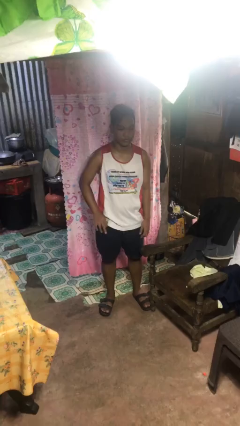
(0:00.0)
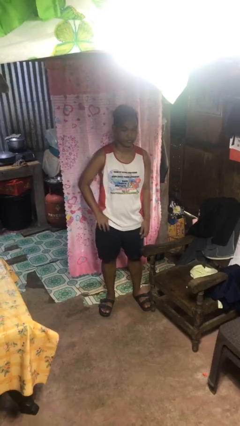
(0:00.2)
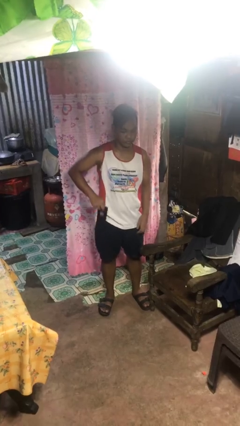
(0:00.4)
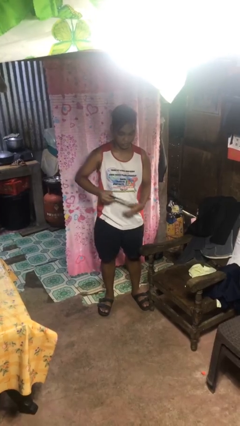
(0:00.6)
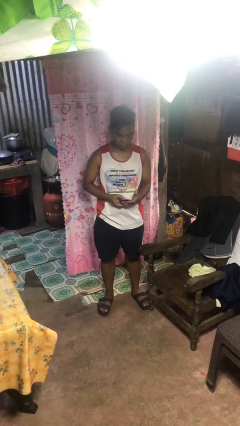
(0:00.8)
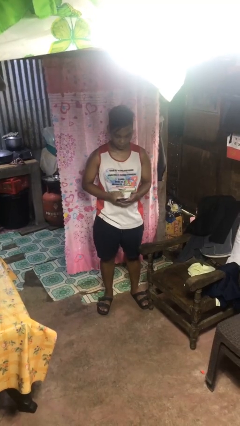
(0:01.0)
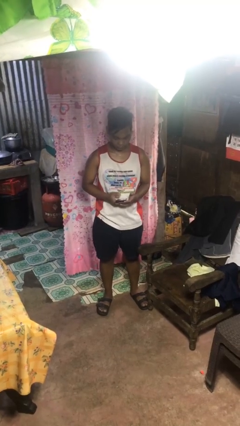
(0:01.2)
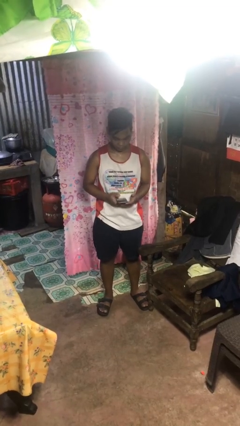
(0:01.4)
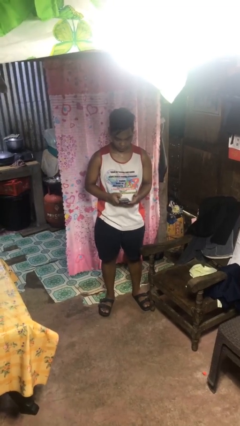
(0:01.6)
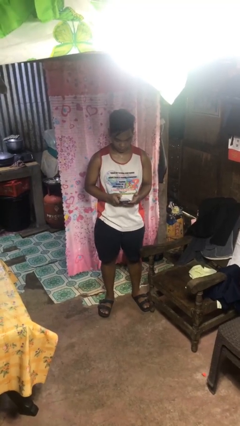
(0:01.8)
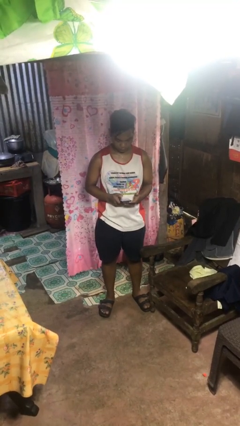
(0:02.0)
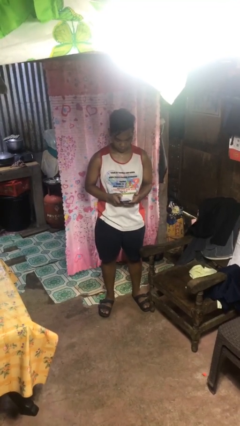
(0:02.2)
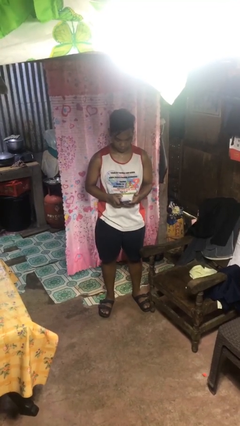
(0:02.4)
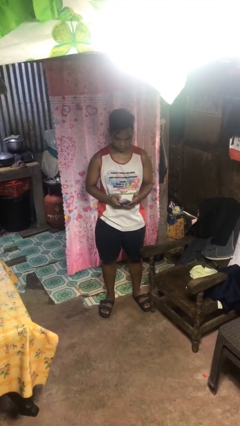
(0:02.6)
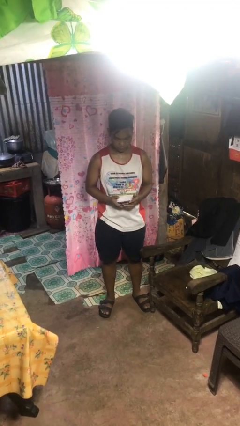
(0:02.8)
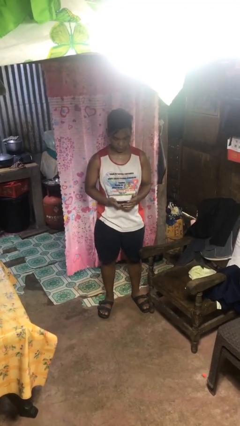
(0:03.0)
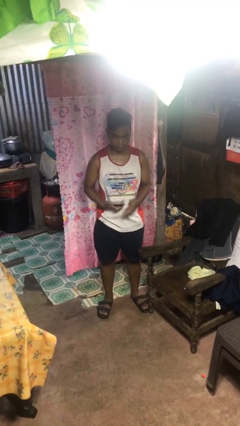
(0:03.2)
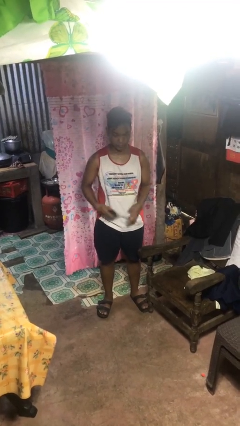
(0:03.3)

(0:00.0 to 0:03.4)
person takes phone from pocket

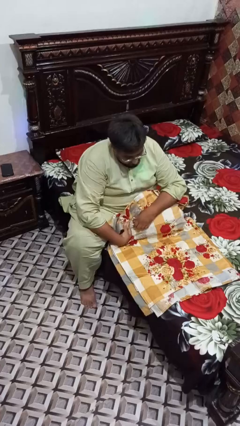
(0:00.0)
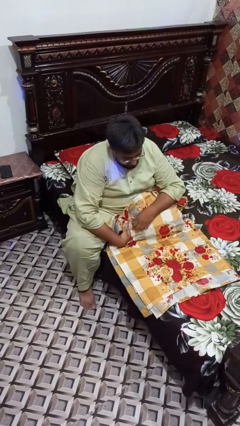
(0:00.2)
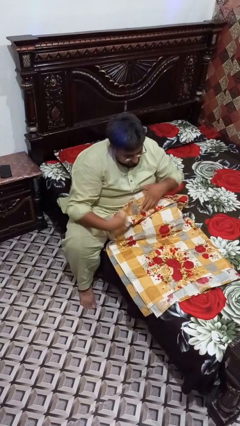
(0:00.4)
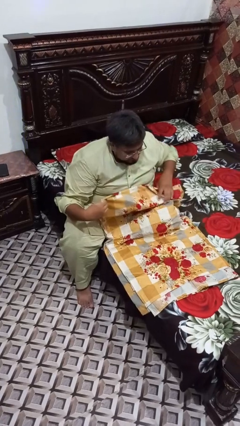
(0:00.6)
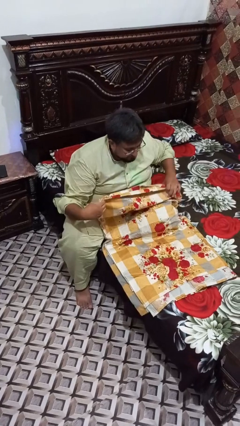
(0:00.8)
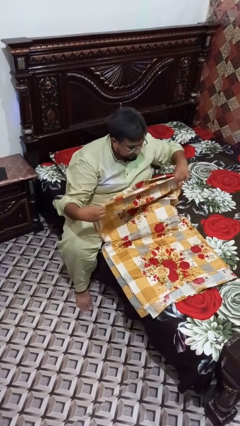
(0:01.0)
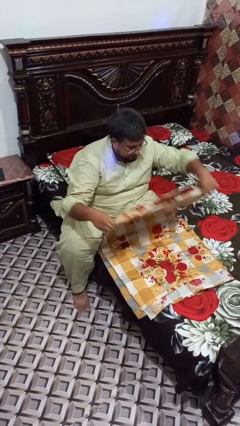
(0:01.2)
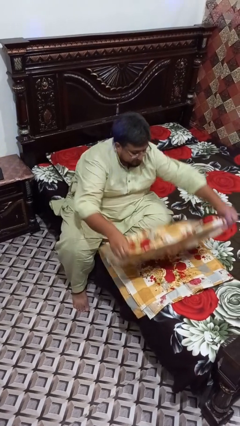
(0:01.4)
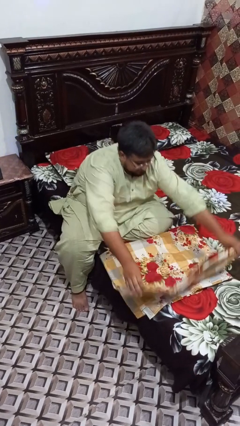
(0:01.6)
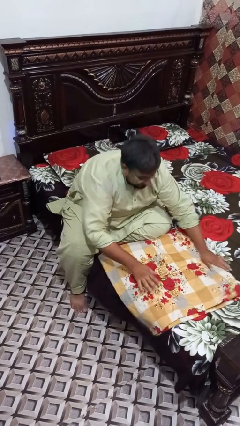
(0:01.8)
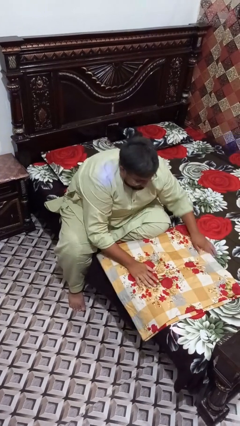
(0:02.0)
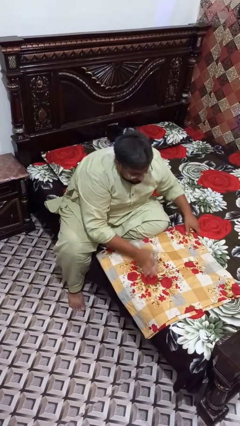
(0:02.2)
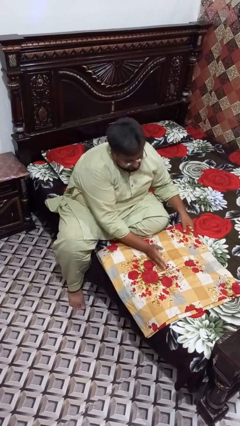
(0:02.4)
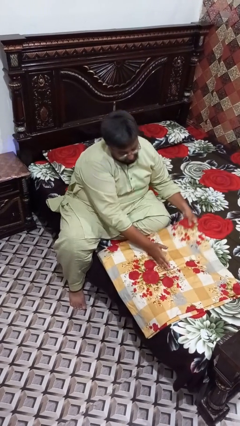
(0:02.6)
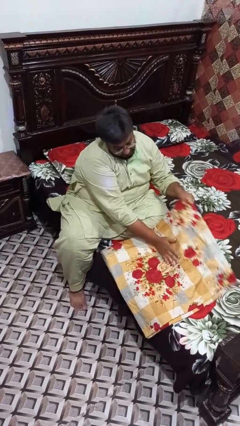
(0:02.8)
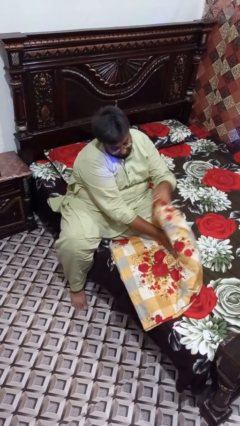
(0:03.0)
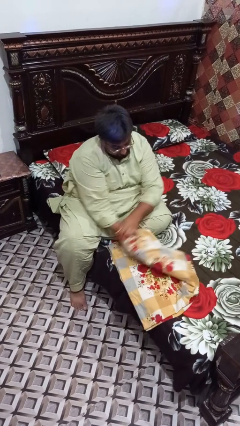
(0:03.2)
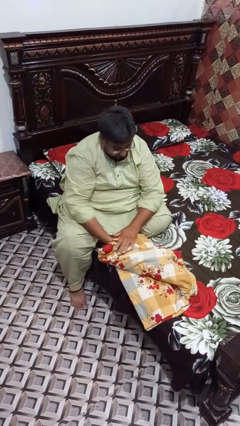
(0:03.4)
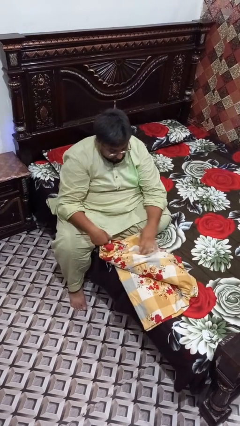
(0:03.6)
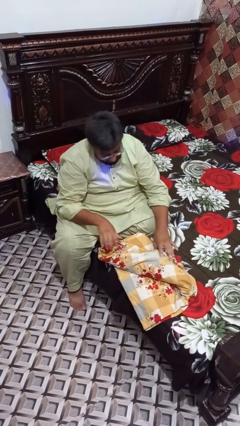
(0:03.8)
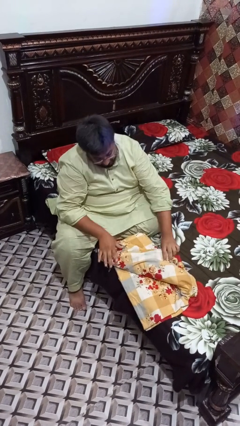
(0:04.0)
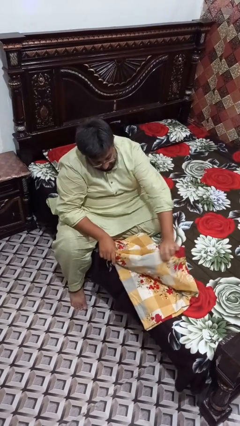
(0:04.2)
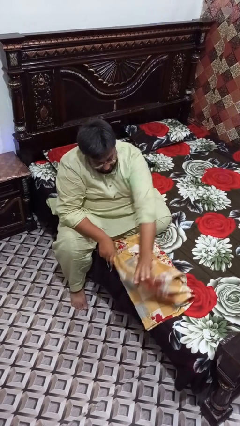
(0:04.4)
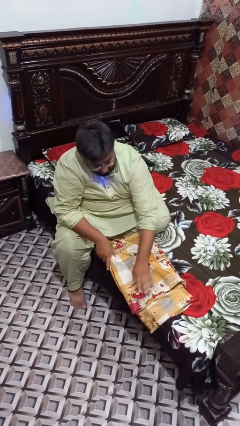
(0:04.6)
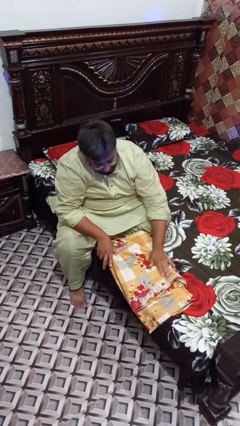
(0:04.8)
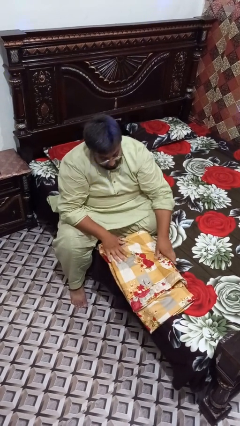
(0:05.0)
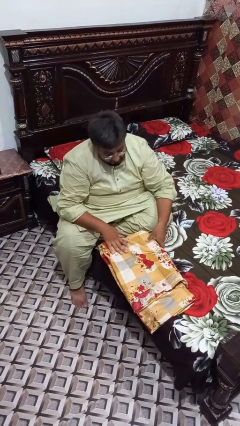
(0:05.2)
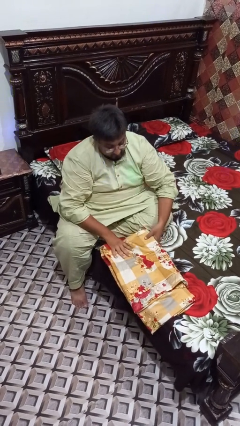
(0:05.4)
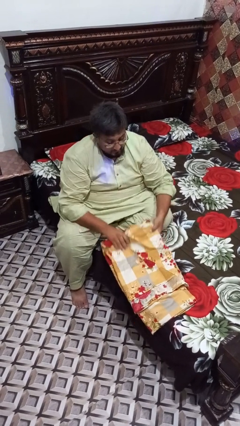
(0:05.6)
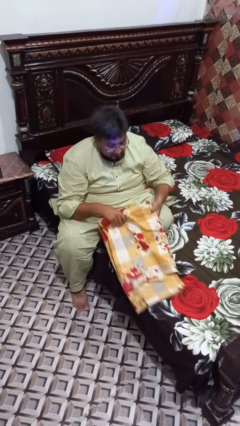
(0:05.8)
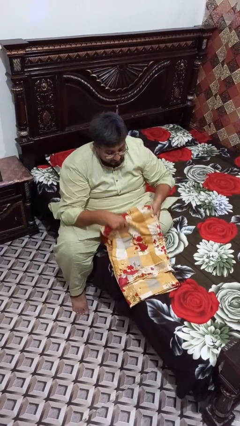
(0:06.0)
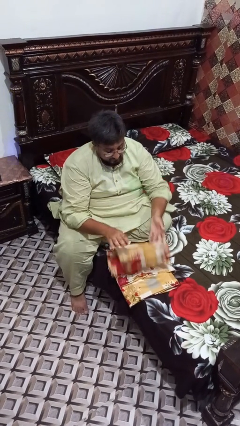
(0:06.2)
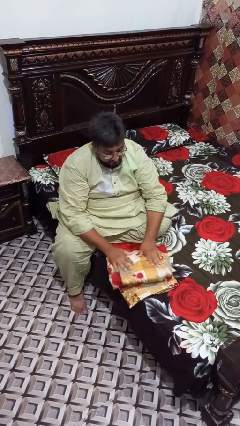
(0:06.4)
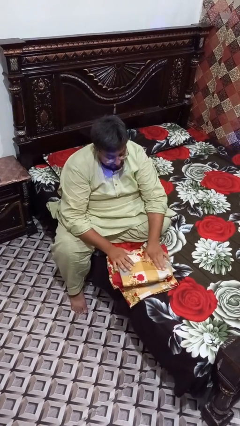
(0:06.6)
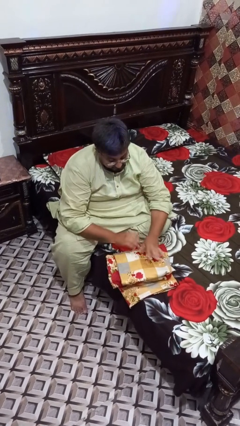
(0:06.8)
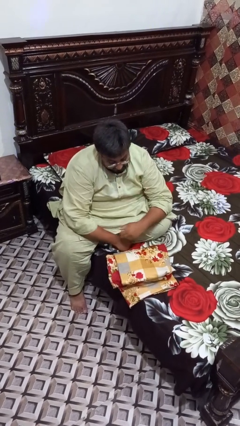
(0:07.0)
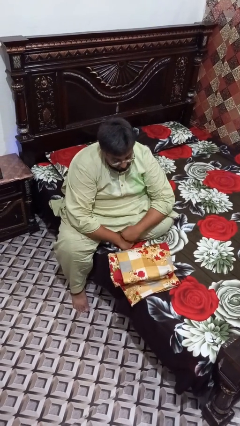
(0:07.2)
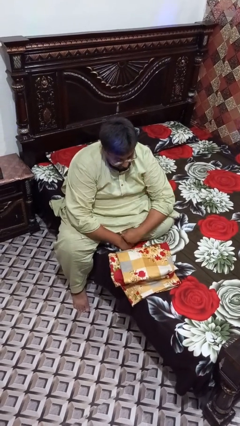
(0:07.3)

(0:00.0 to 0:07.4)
person folds blanket

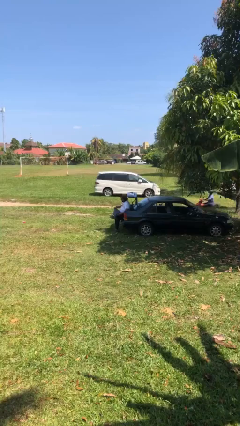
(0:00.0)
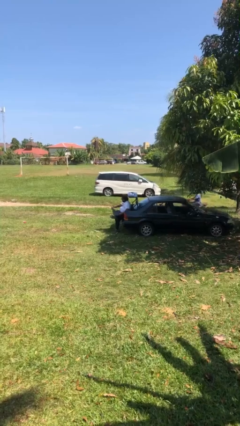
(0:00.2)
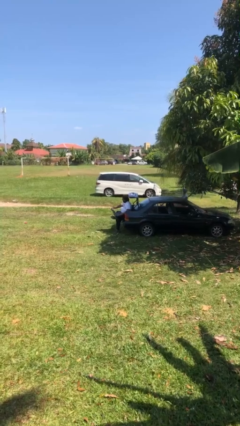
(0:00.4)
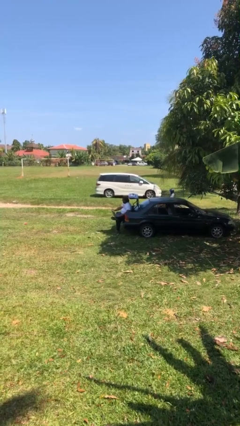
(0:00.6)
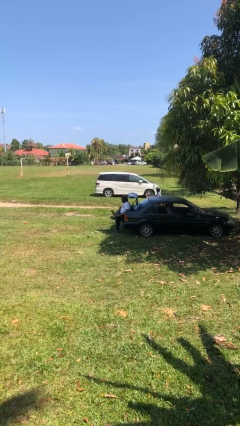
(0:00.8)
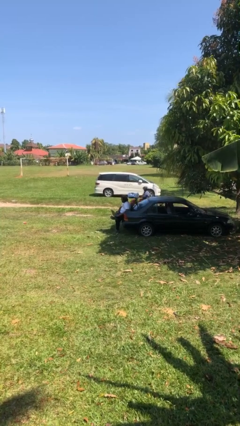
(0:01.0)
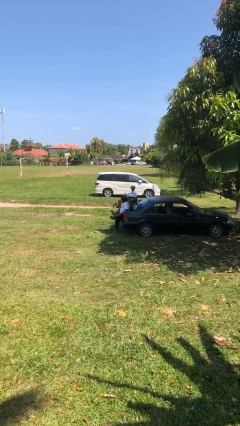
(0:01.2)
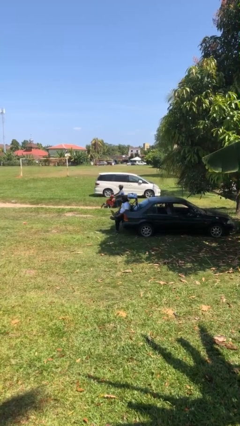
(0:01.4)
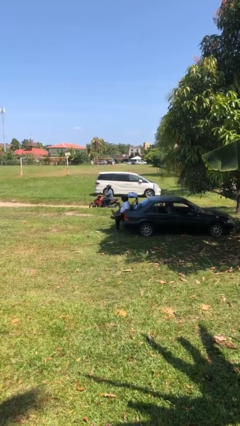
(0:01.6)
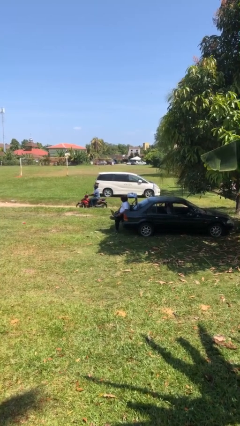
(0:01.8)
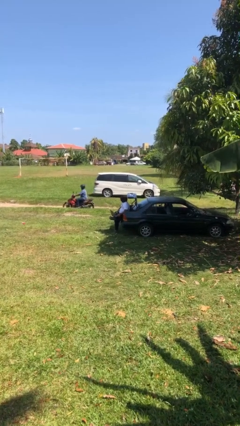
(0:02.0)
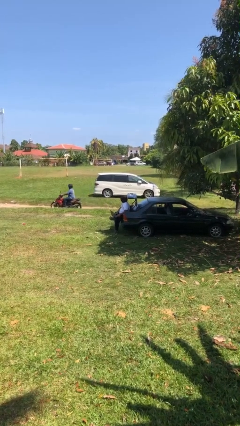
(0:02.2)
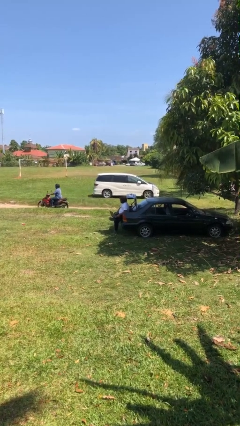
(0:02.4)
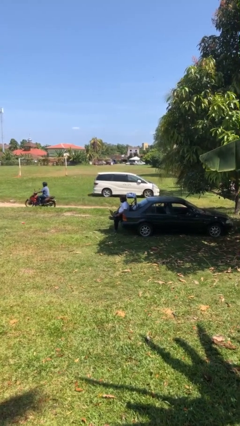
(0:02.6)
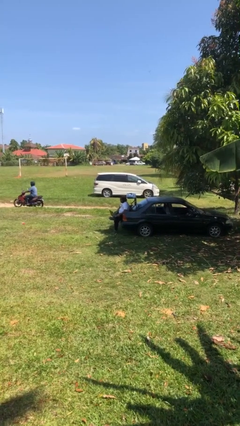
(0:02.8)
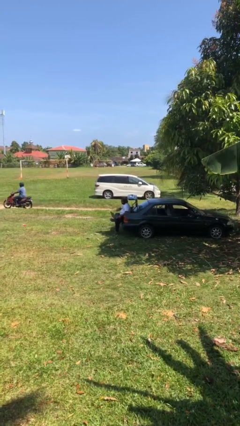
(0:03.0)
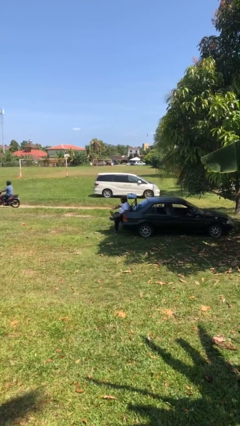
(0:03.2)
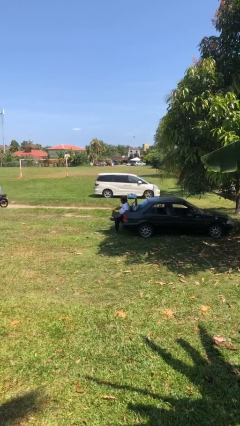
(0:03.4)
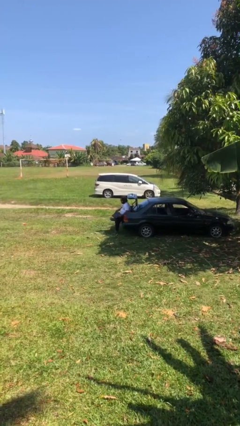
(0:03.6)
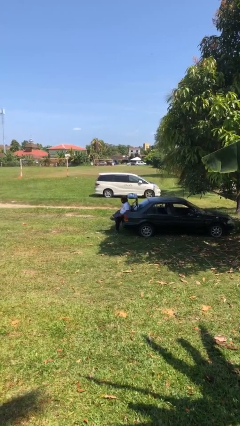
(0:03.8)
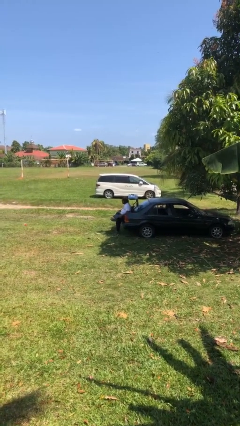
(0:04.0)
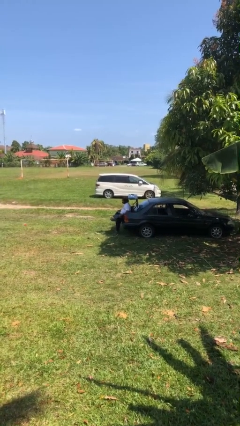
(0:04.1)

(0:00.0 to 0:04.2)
person interacts with laptop

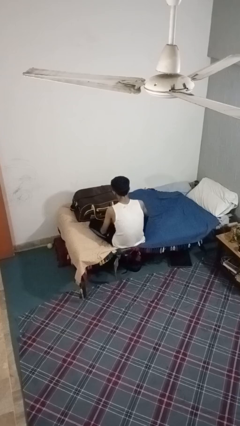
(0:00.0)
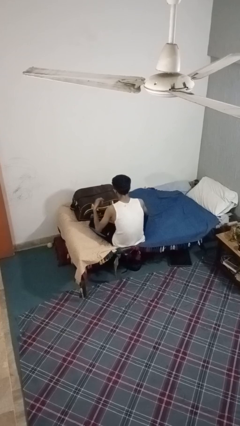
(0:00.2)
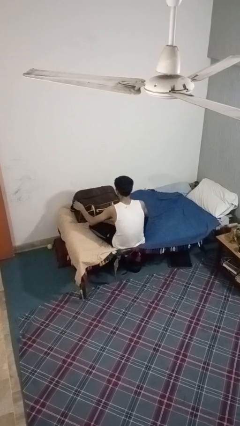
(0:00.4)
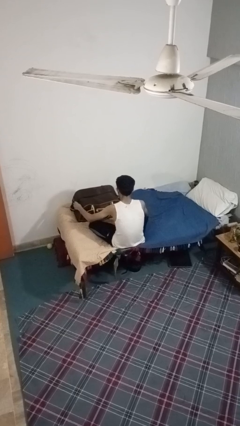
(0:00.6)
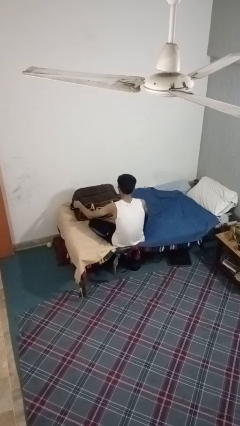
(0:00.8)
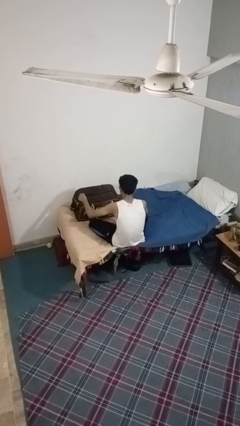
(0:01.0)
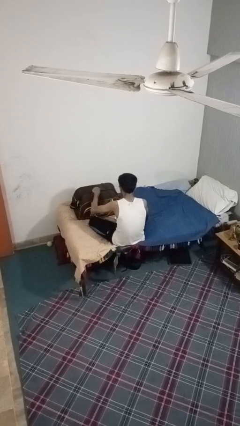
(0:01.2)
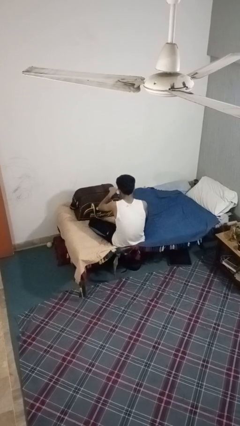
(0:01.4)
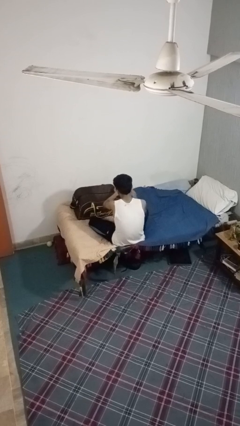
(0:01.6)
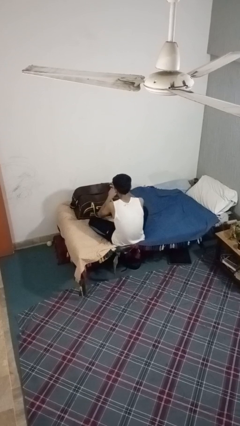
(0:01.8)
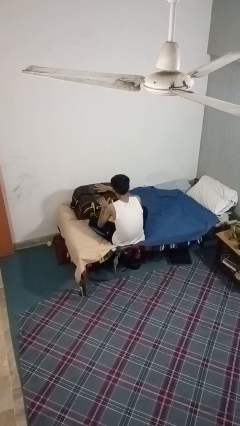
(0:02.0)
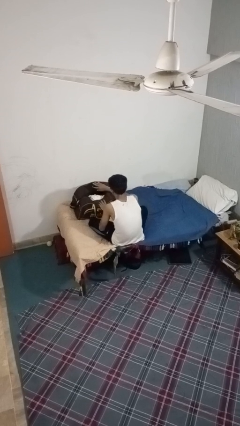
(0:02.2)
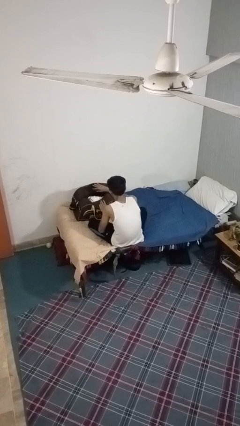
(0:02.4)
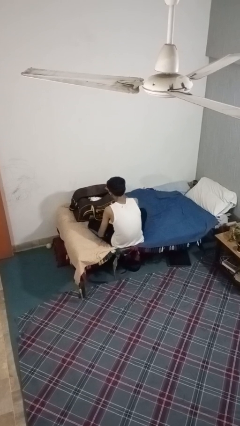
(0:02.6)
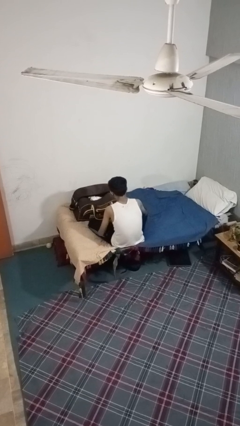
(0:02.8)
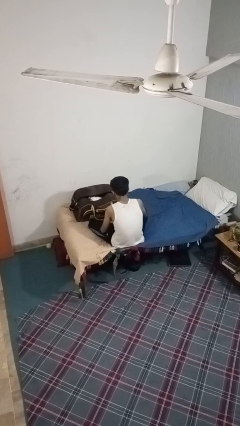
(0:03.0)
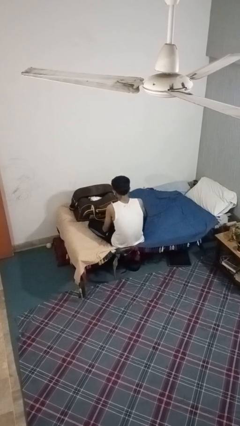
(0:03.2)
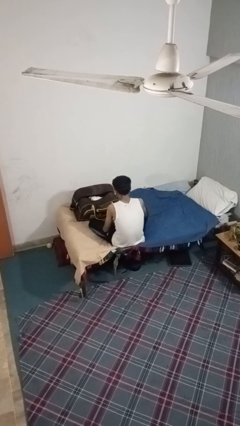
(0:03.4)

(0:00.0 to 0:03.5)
person opens suitcase
